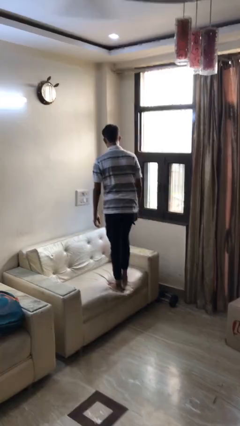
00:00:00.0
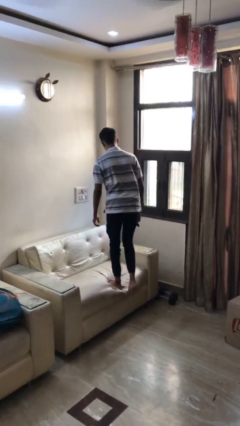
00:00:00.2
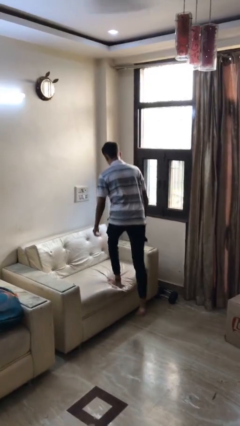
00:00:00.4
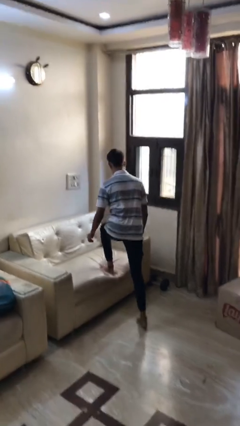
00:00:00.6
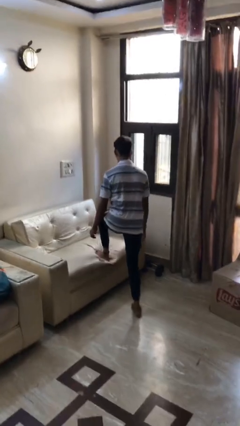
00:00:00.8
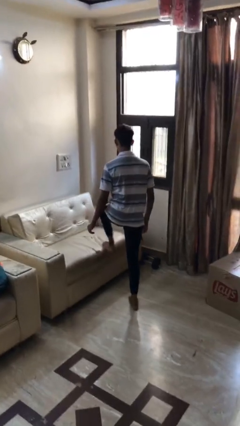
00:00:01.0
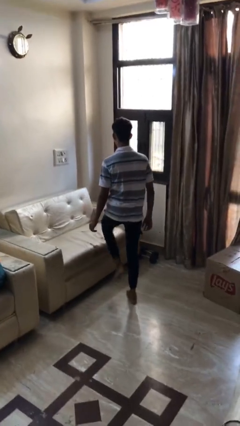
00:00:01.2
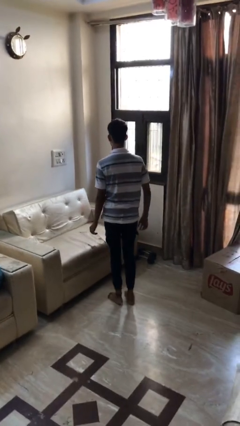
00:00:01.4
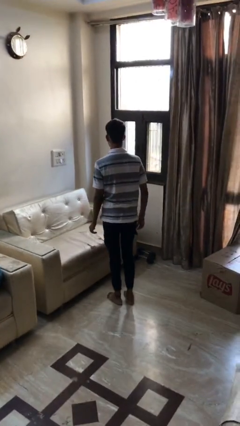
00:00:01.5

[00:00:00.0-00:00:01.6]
person climbs off couch

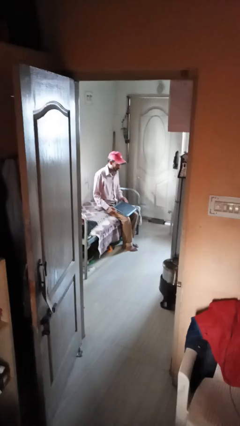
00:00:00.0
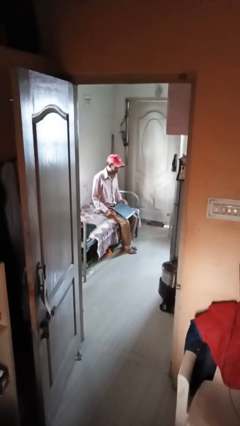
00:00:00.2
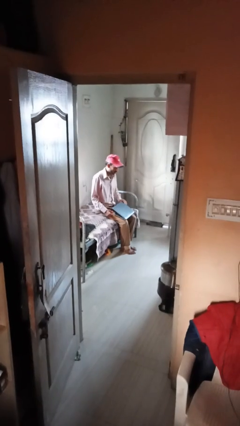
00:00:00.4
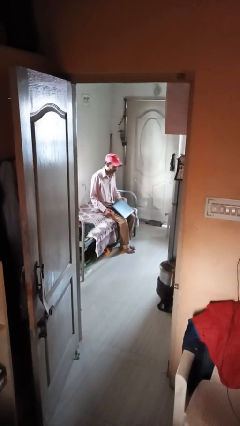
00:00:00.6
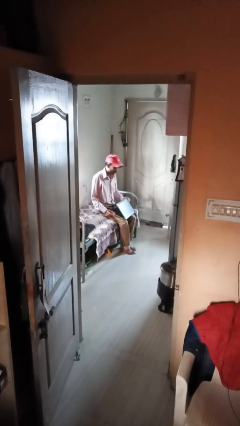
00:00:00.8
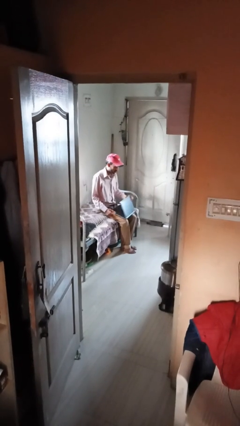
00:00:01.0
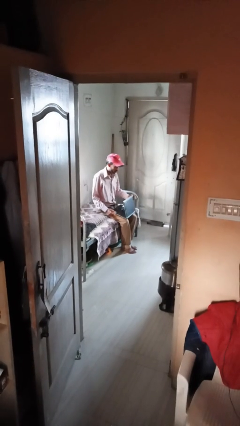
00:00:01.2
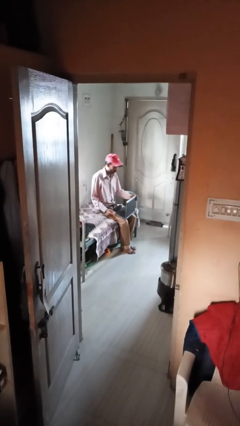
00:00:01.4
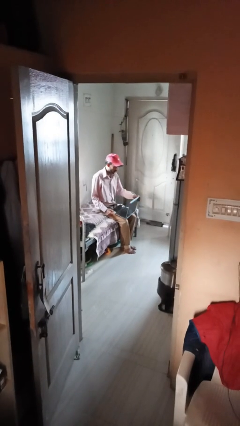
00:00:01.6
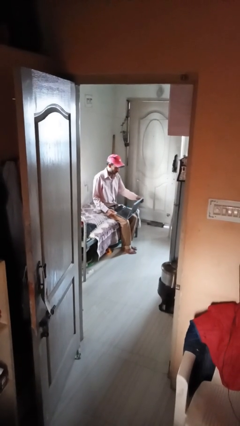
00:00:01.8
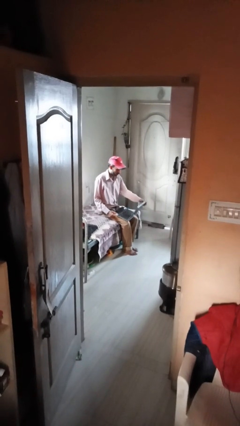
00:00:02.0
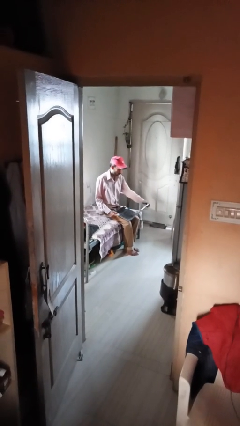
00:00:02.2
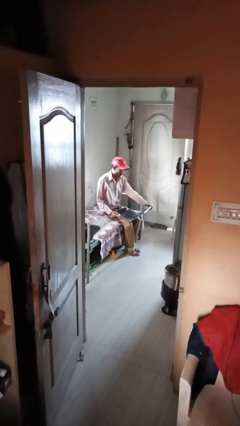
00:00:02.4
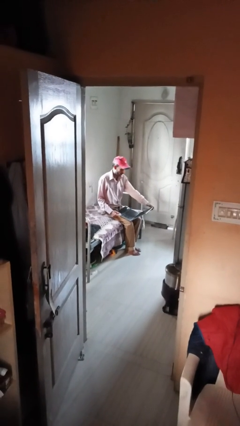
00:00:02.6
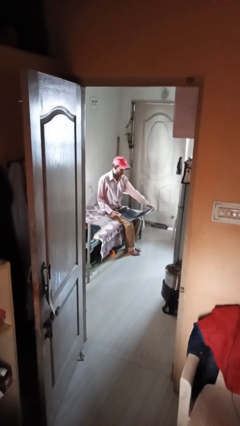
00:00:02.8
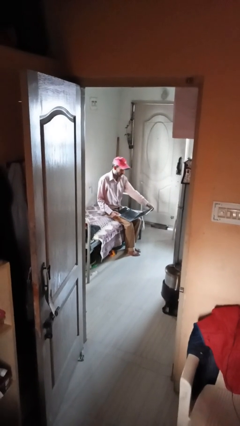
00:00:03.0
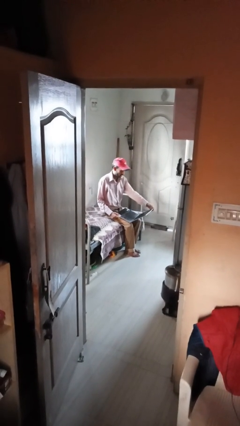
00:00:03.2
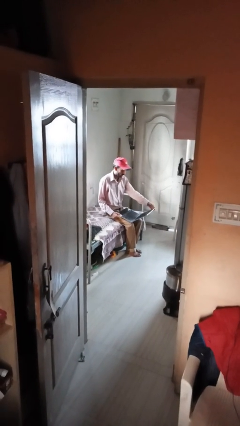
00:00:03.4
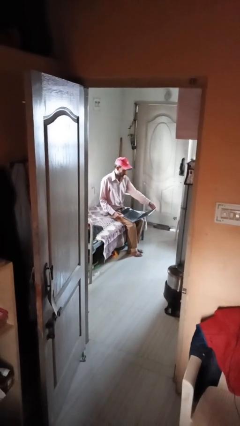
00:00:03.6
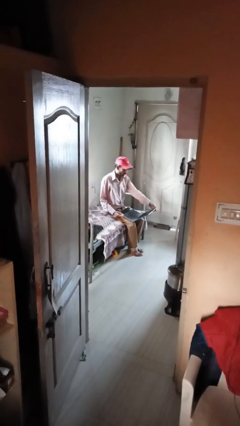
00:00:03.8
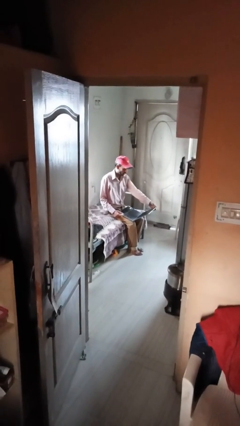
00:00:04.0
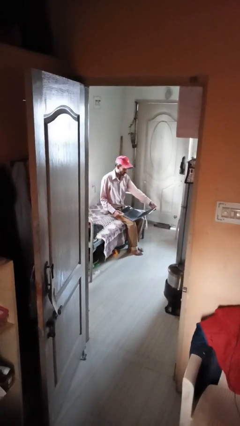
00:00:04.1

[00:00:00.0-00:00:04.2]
person opens laptop

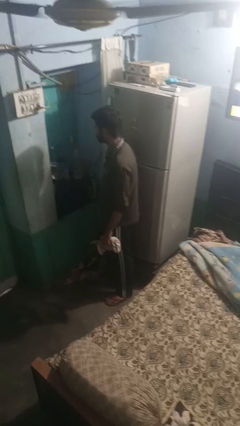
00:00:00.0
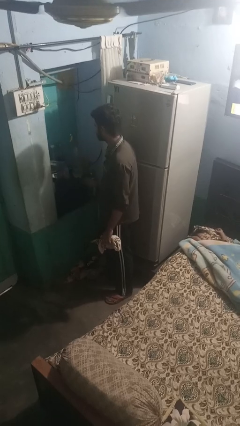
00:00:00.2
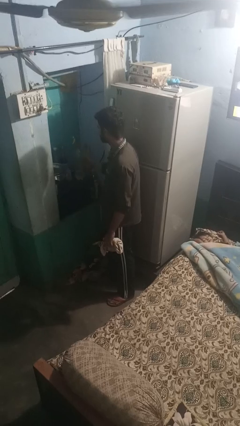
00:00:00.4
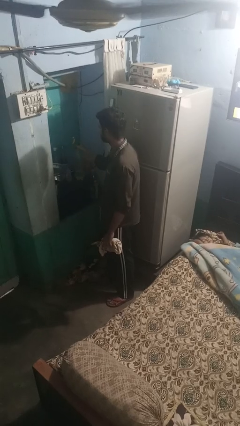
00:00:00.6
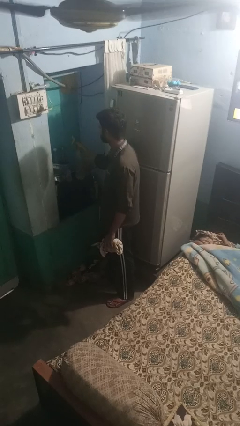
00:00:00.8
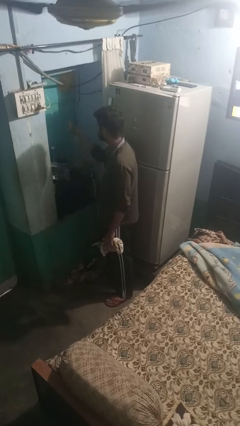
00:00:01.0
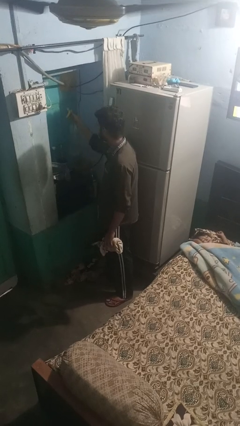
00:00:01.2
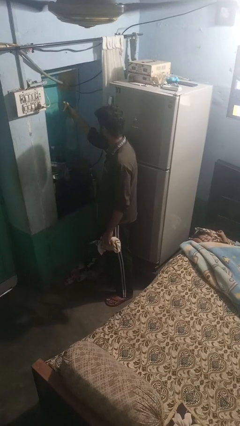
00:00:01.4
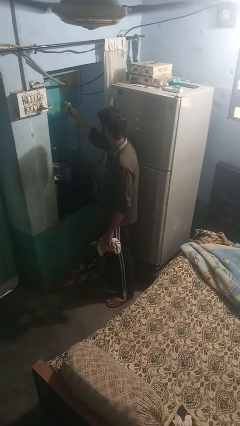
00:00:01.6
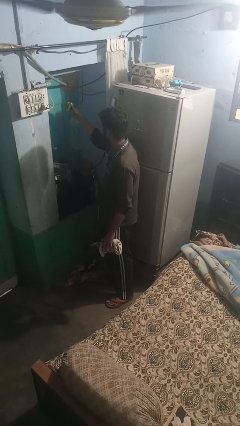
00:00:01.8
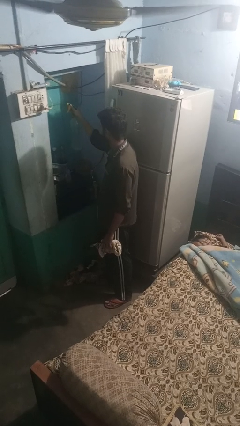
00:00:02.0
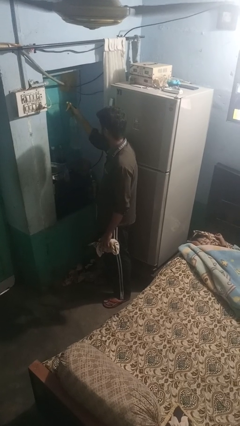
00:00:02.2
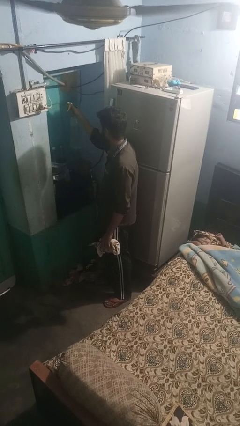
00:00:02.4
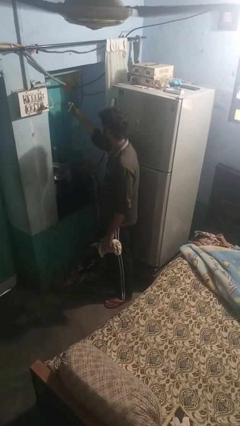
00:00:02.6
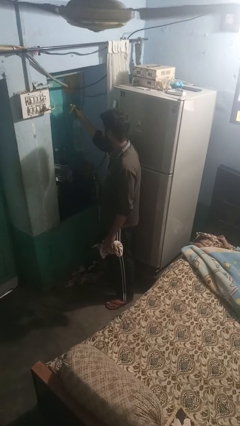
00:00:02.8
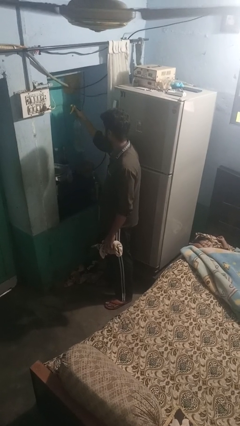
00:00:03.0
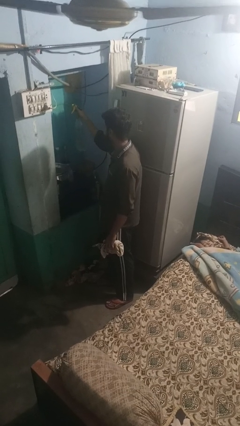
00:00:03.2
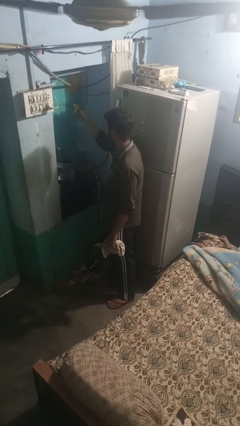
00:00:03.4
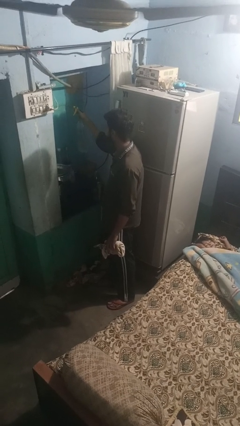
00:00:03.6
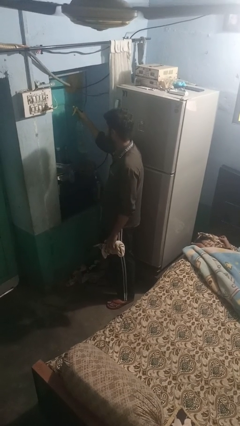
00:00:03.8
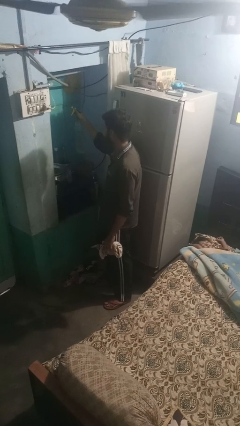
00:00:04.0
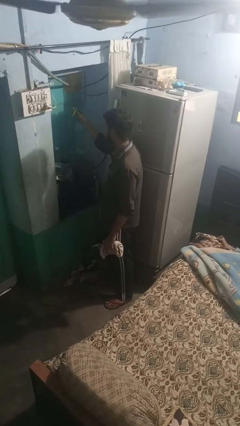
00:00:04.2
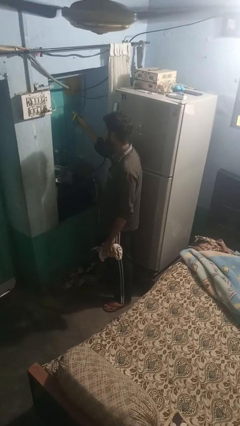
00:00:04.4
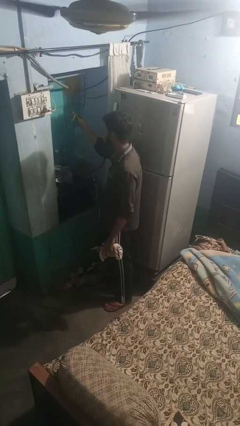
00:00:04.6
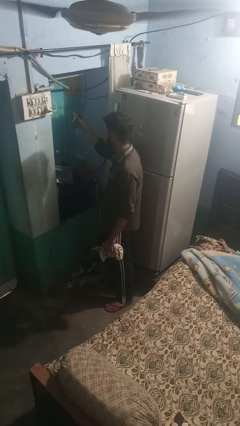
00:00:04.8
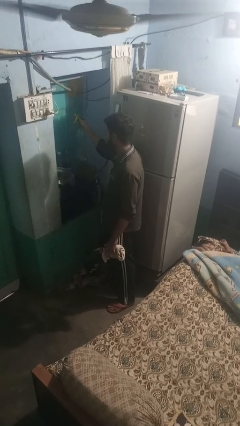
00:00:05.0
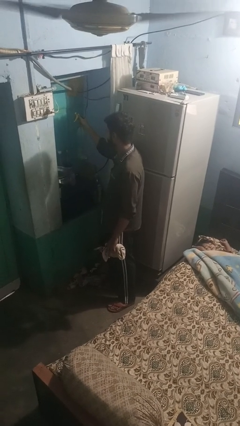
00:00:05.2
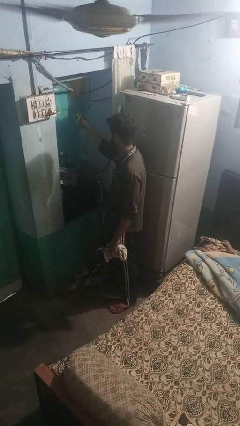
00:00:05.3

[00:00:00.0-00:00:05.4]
person sprays from bottle

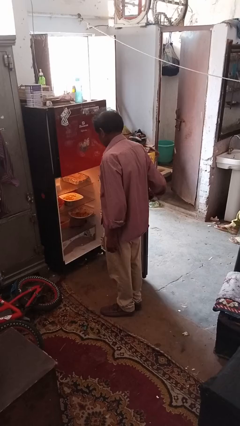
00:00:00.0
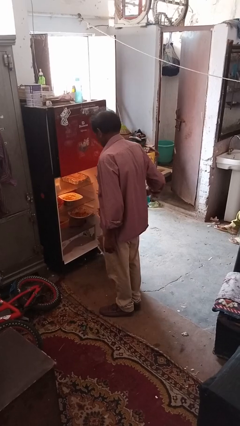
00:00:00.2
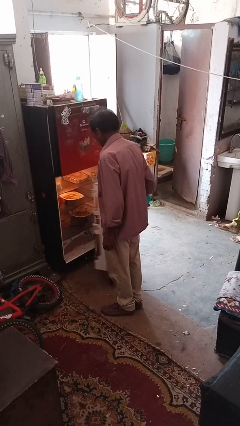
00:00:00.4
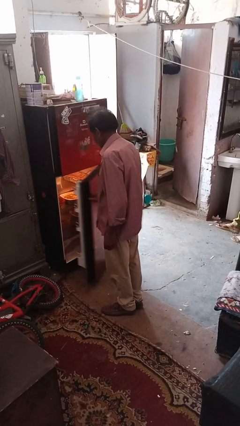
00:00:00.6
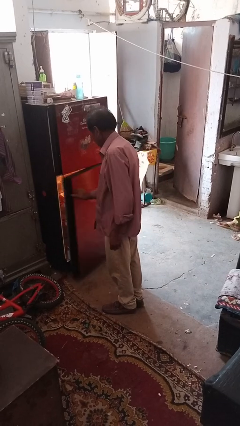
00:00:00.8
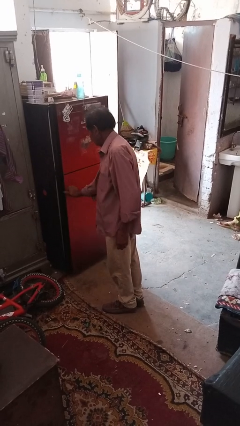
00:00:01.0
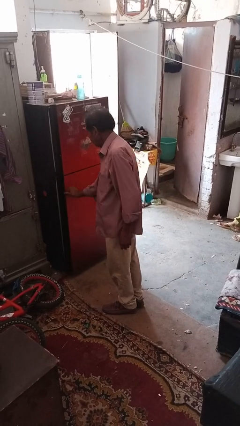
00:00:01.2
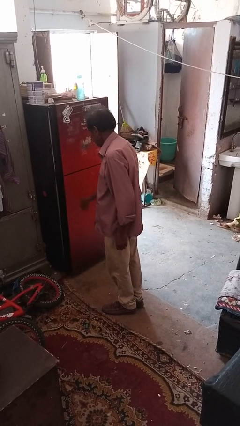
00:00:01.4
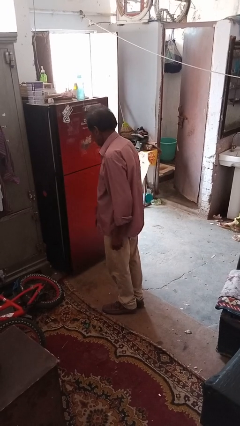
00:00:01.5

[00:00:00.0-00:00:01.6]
person closes refrigerator

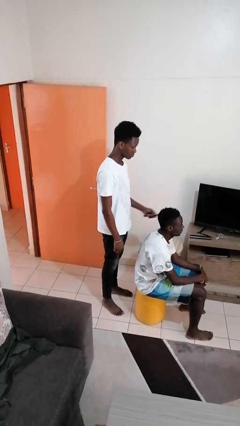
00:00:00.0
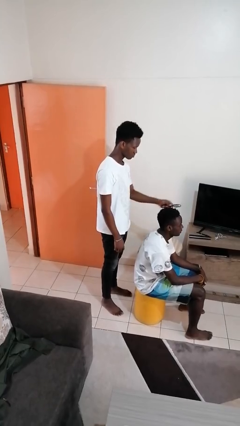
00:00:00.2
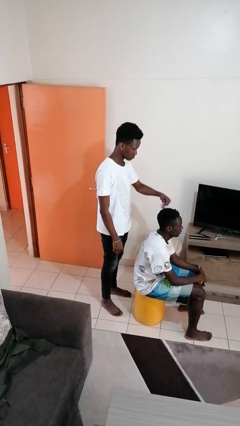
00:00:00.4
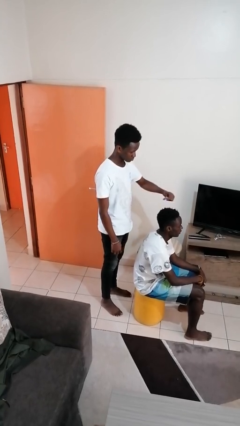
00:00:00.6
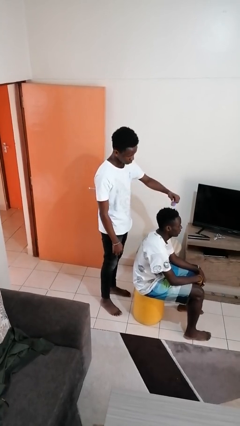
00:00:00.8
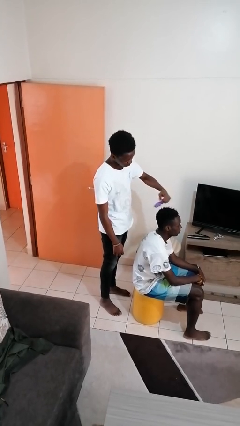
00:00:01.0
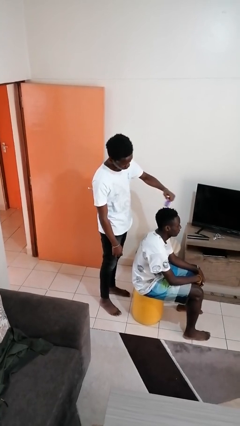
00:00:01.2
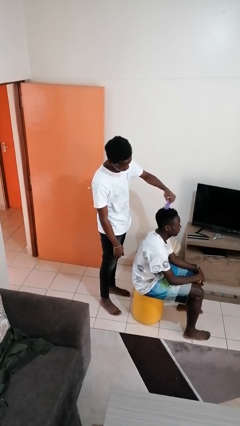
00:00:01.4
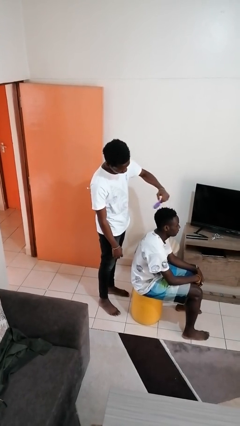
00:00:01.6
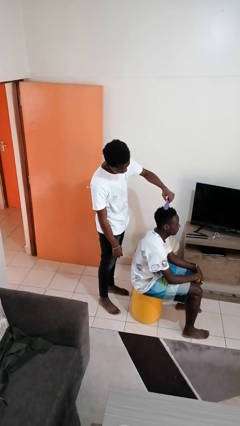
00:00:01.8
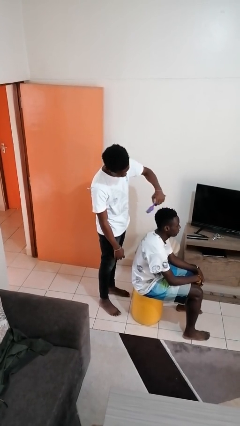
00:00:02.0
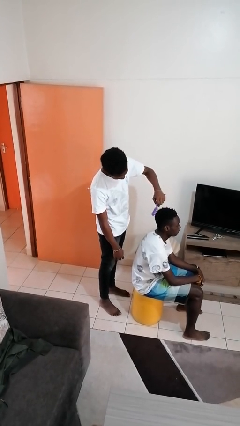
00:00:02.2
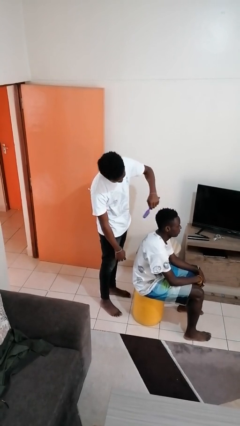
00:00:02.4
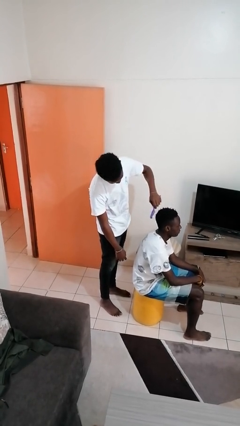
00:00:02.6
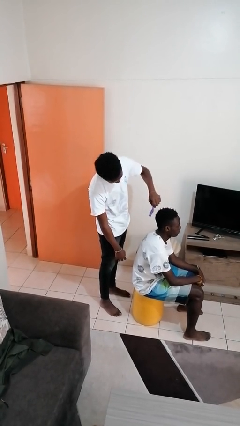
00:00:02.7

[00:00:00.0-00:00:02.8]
person brushes hair of person

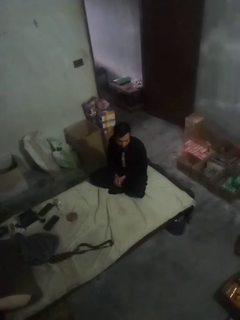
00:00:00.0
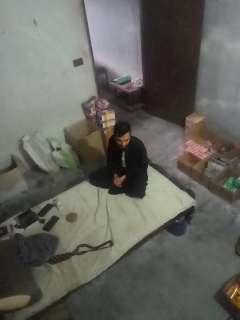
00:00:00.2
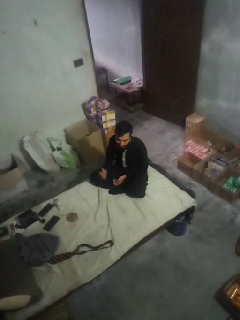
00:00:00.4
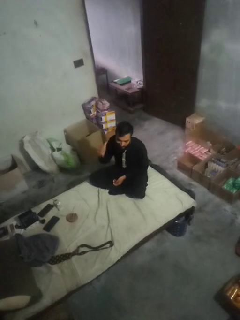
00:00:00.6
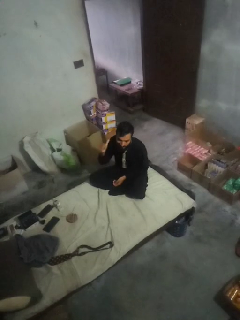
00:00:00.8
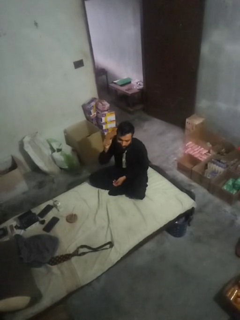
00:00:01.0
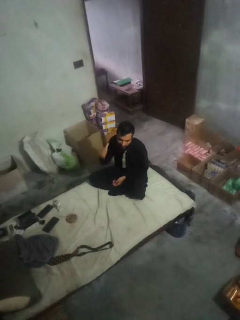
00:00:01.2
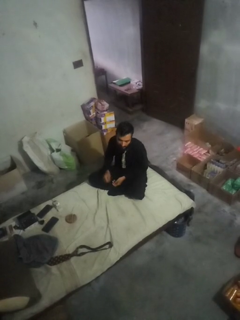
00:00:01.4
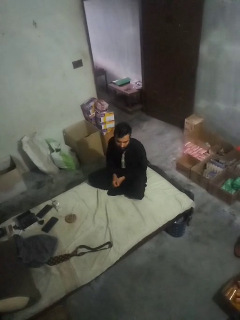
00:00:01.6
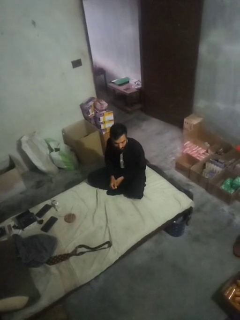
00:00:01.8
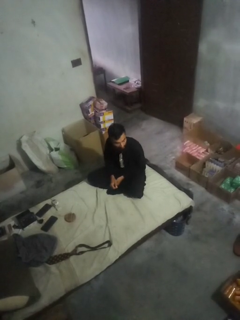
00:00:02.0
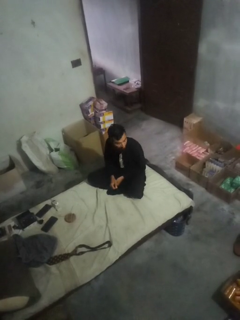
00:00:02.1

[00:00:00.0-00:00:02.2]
person gestures behind me
